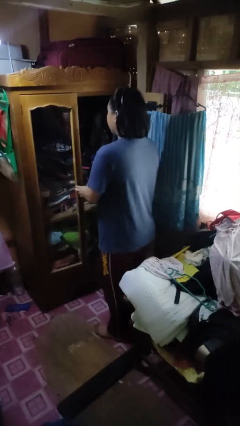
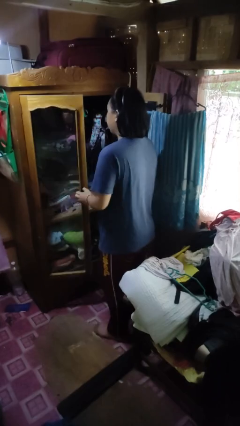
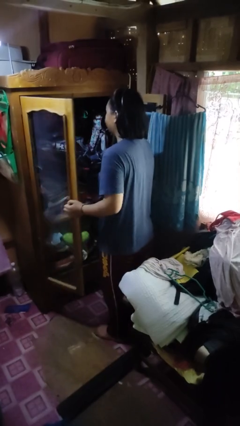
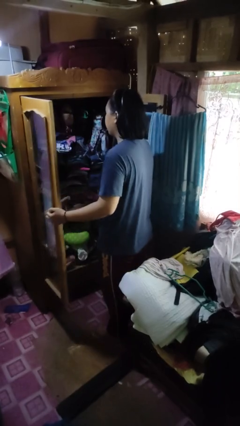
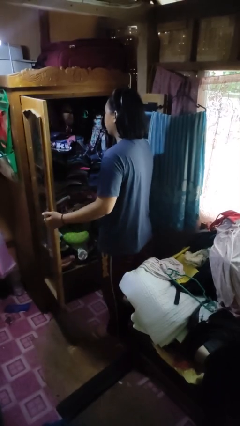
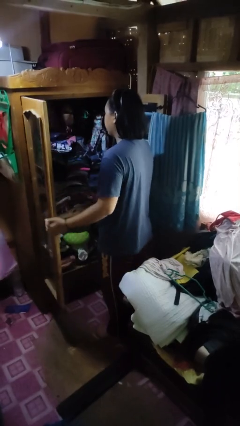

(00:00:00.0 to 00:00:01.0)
person opens closet door

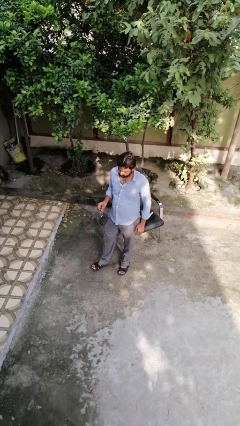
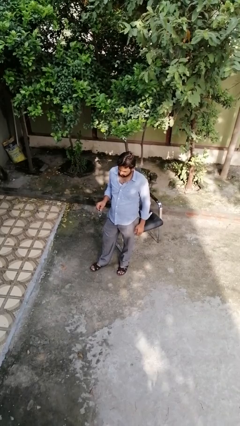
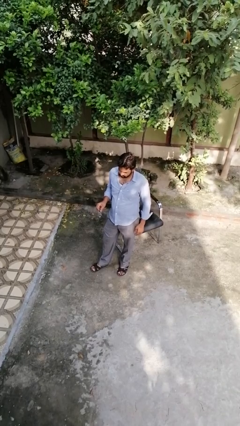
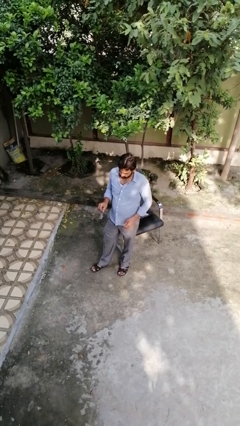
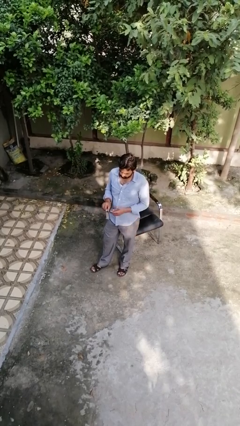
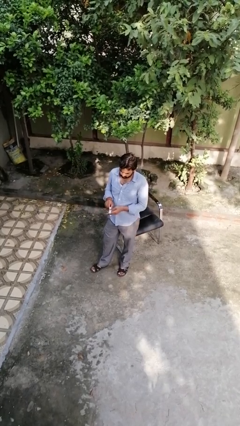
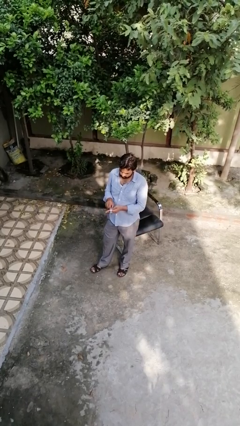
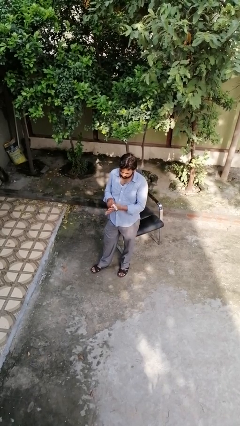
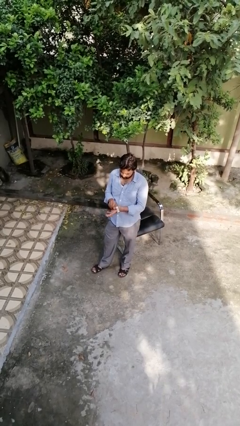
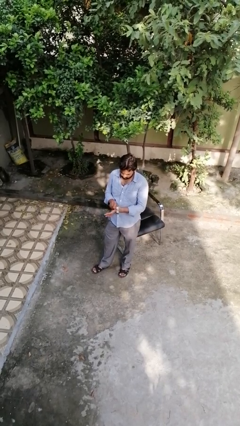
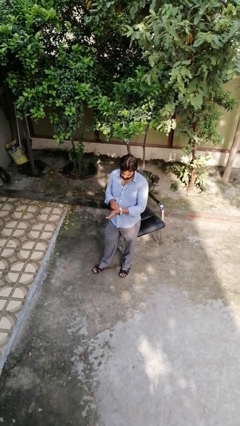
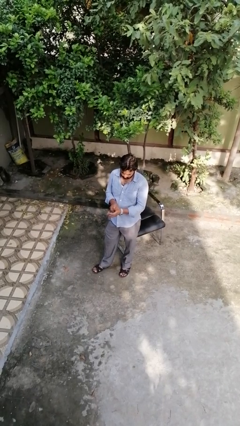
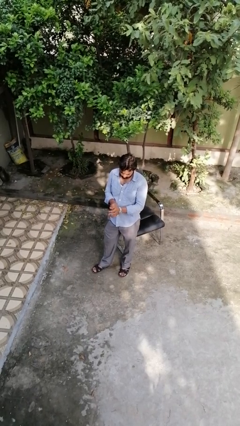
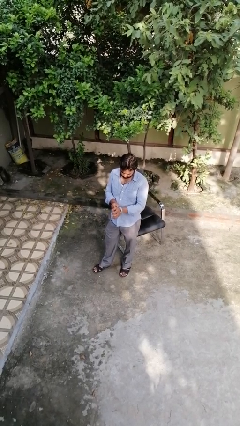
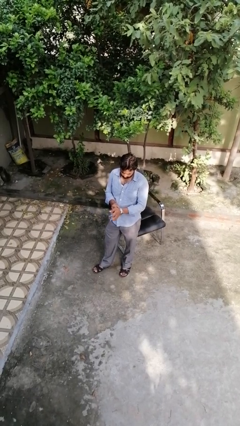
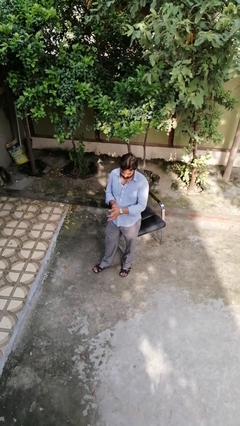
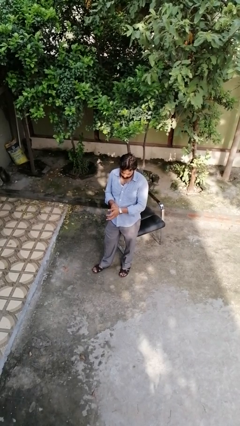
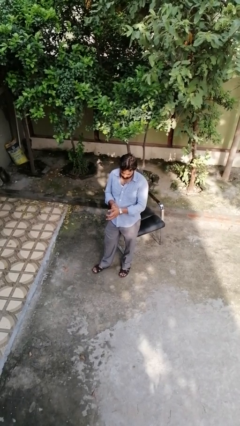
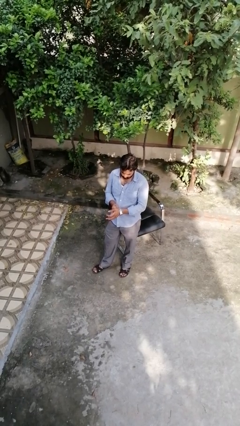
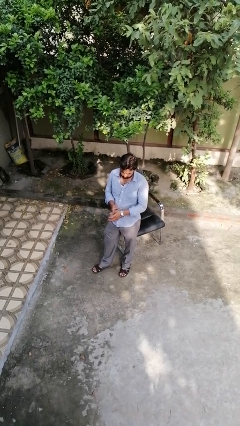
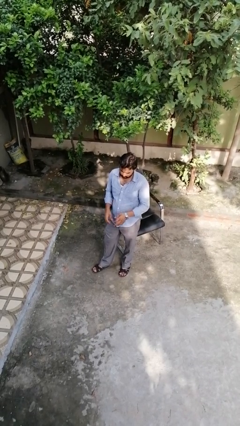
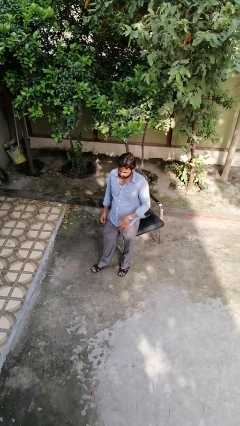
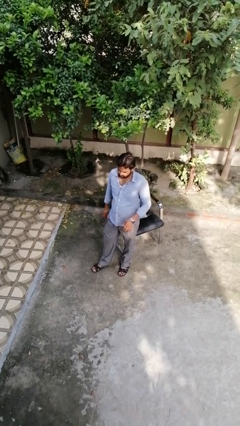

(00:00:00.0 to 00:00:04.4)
person puts on wristwatch

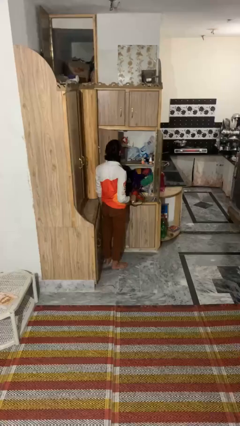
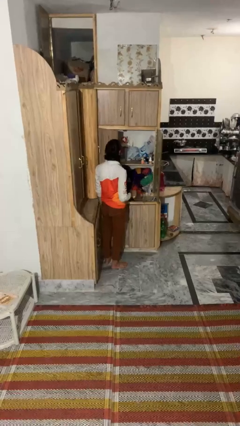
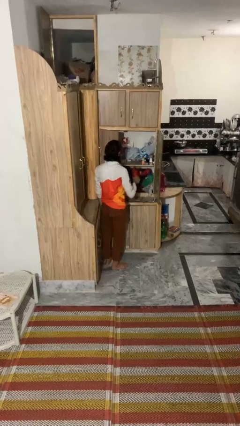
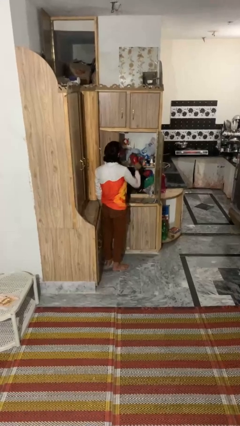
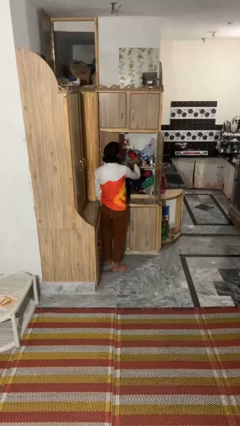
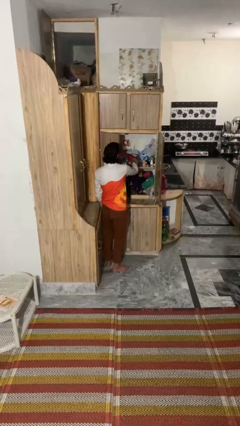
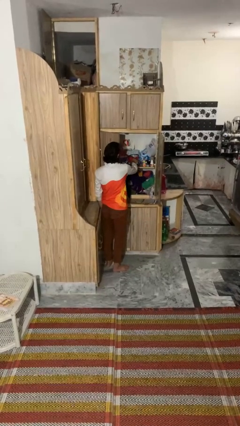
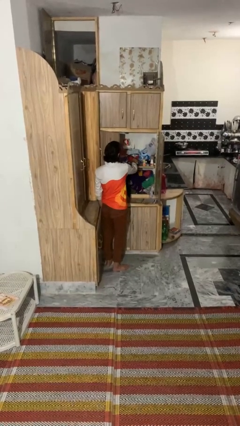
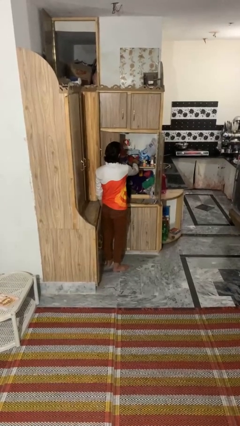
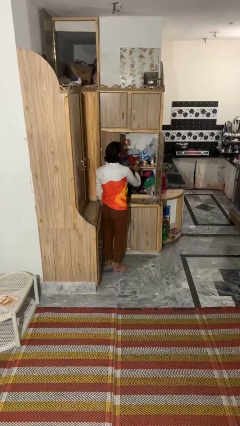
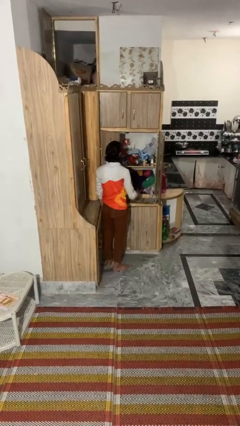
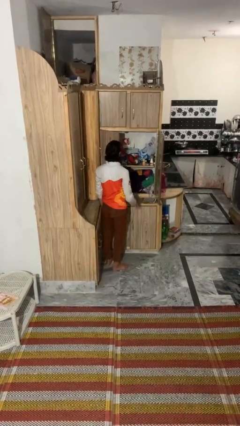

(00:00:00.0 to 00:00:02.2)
person puts down object into cabinet

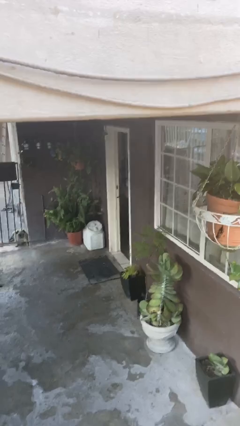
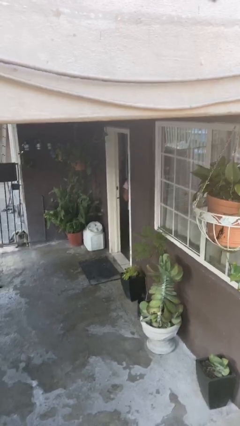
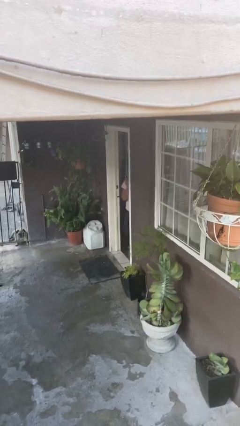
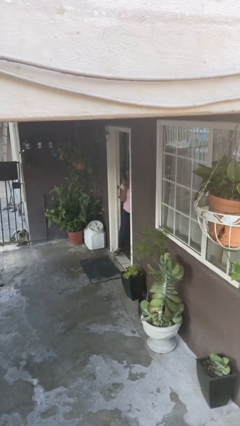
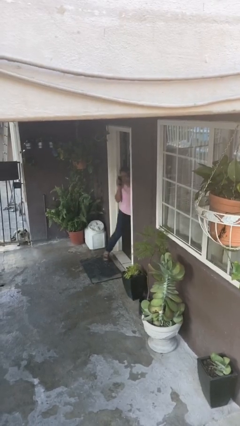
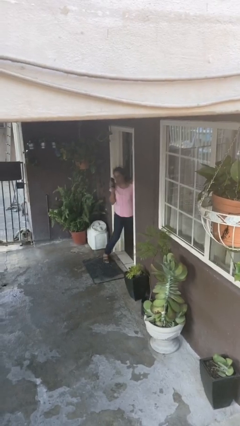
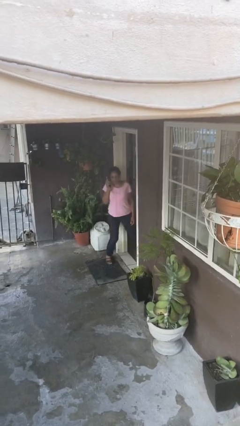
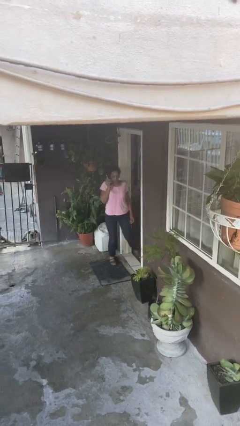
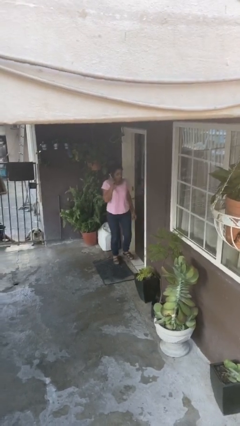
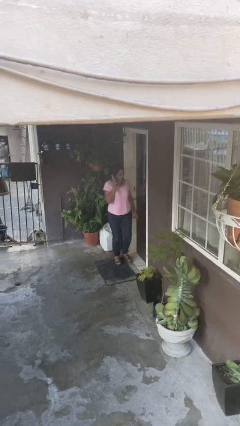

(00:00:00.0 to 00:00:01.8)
person enters scene through structure

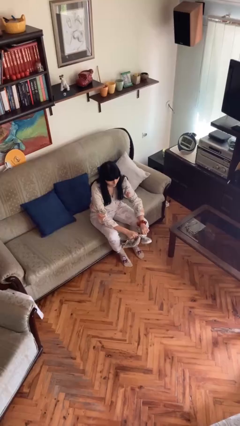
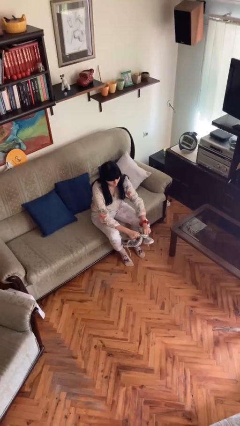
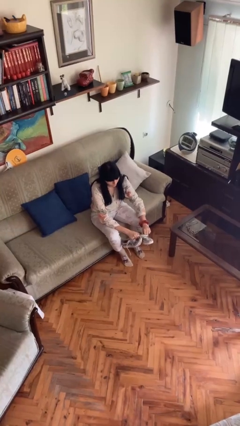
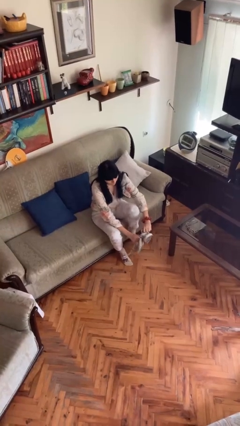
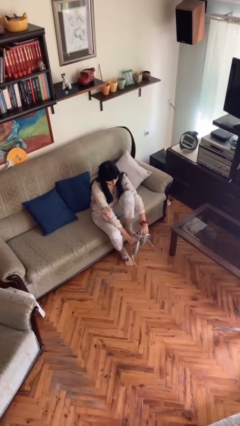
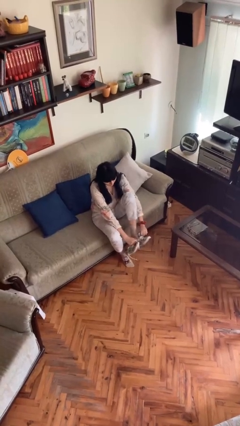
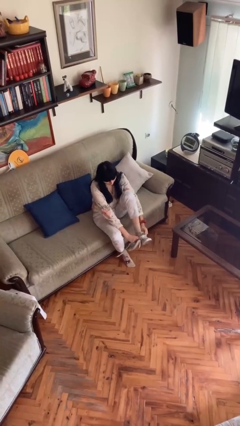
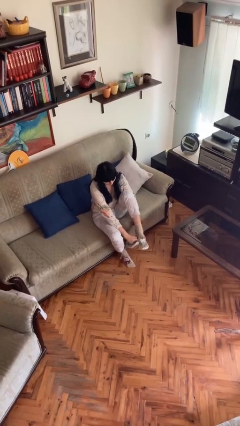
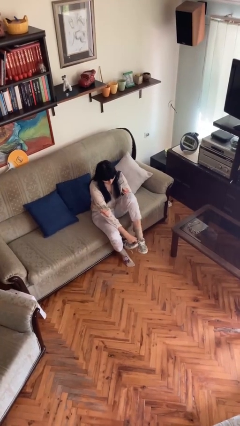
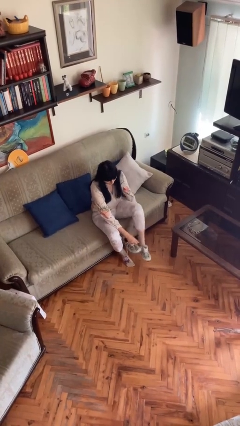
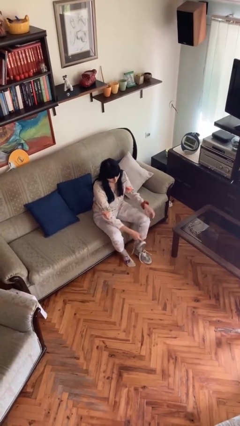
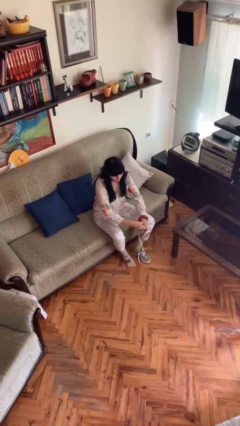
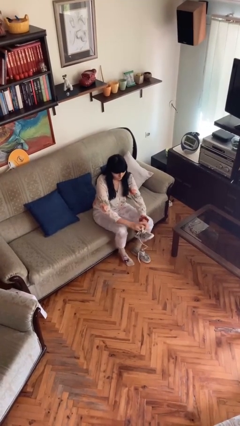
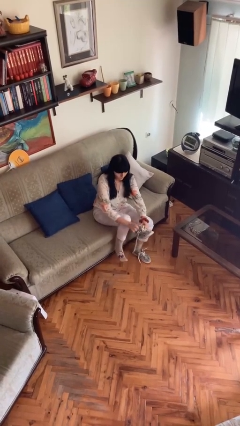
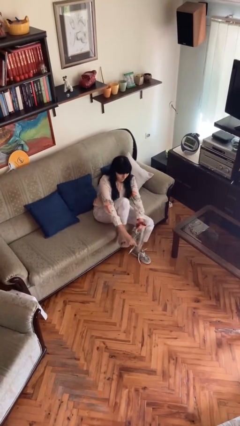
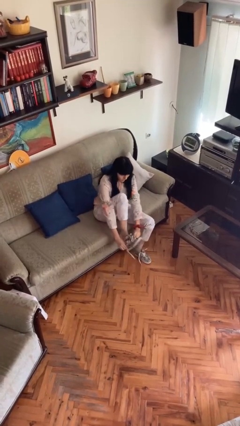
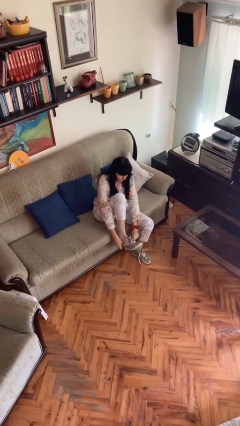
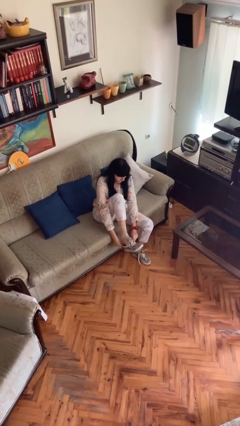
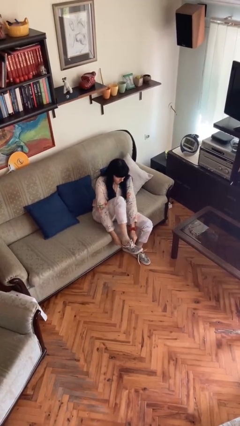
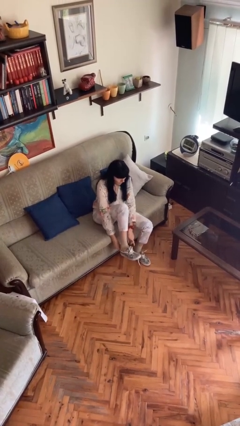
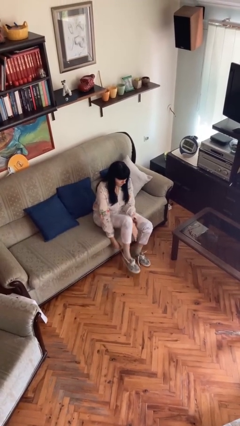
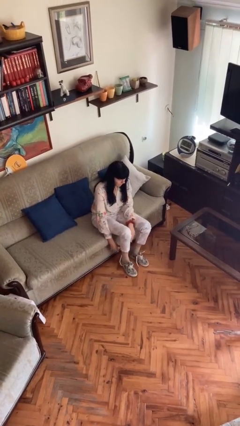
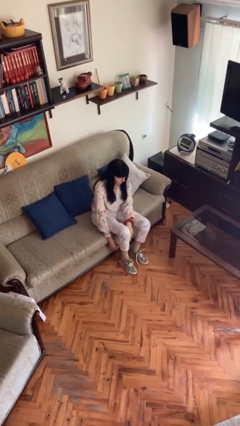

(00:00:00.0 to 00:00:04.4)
person puts on shoes

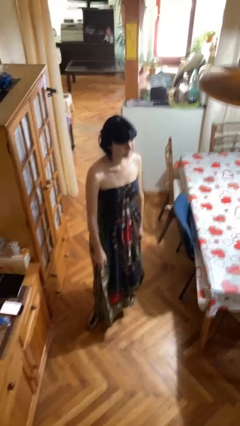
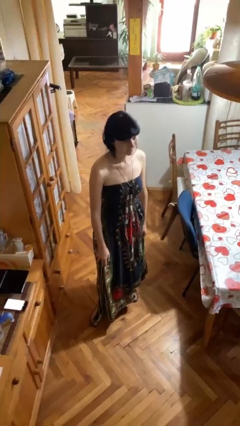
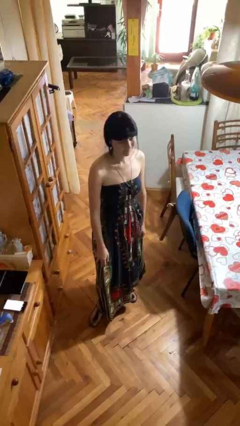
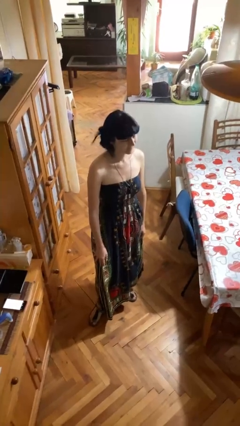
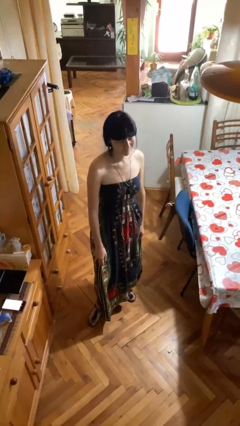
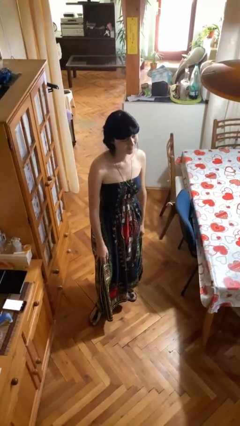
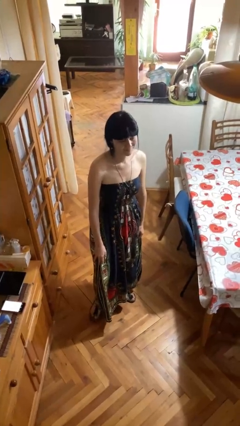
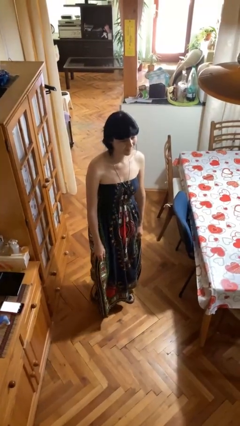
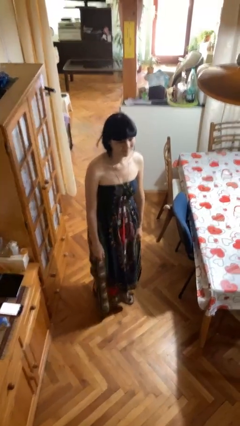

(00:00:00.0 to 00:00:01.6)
person shakes head

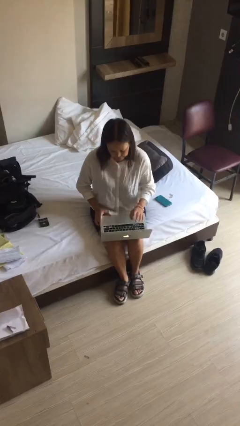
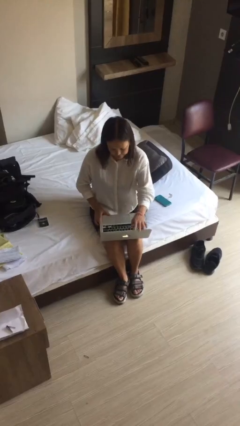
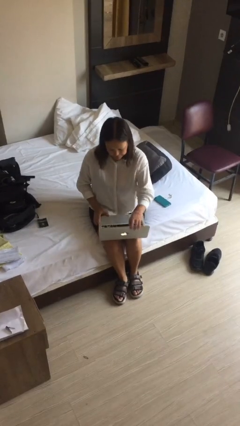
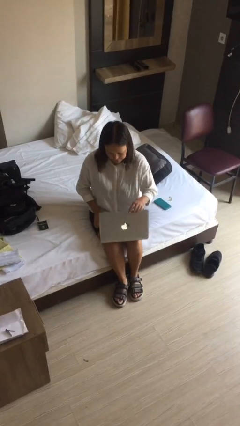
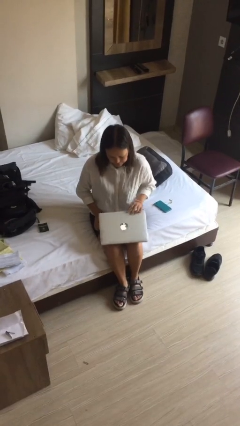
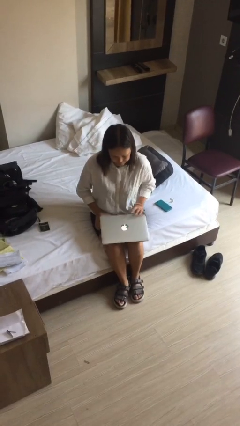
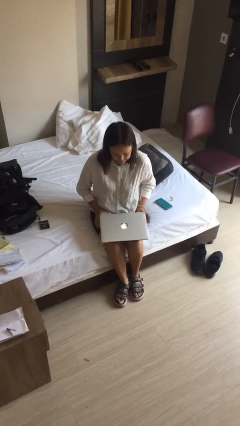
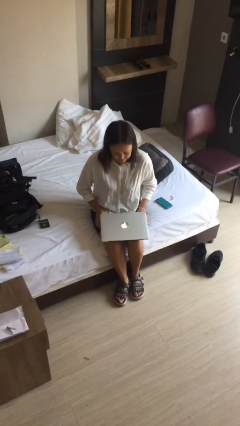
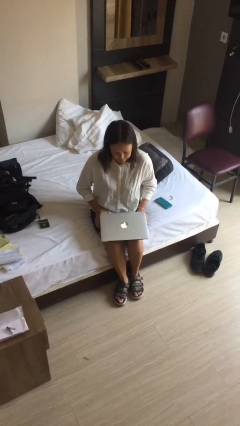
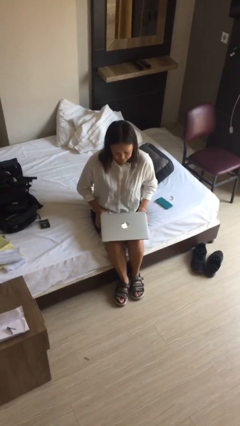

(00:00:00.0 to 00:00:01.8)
person closes laptop
